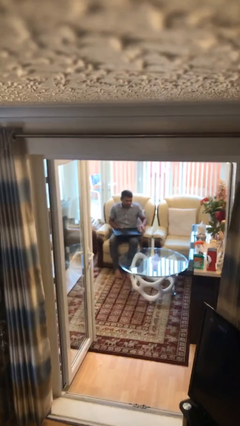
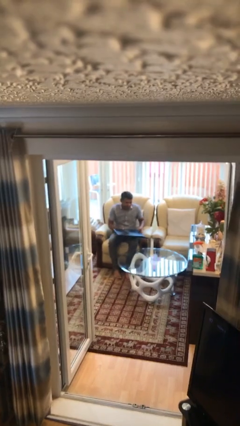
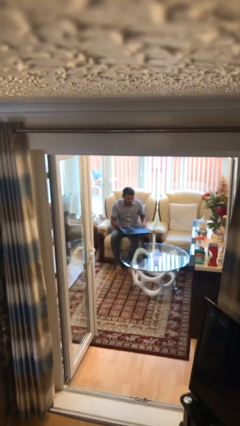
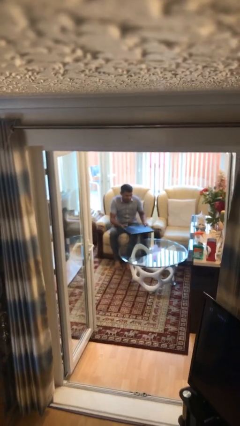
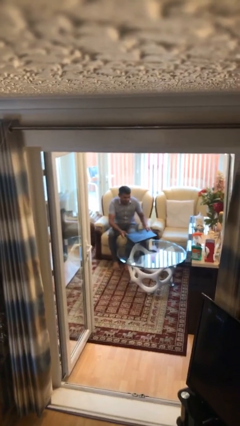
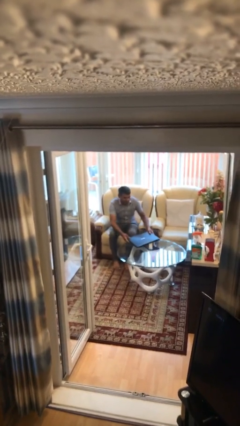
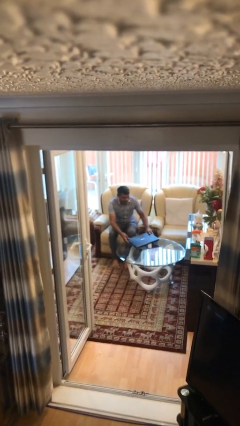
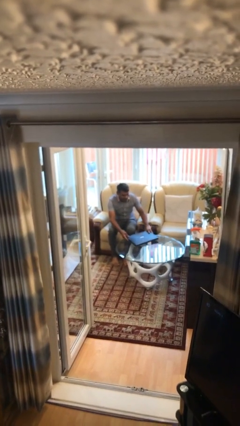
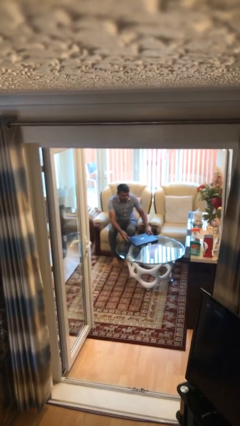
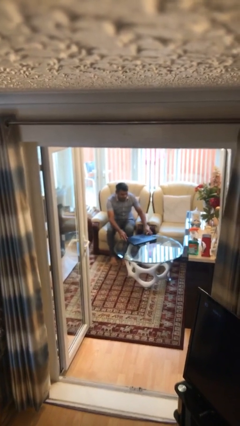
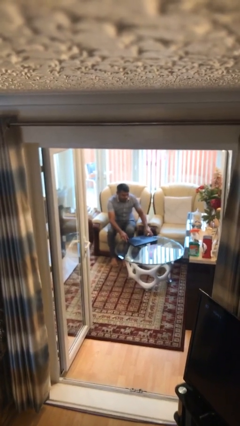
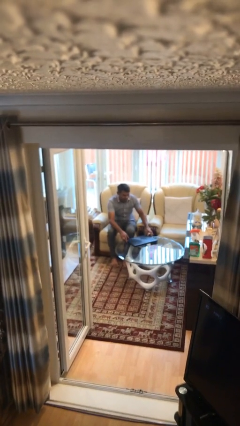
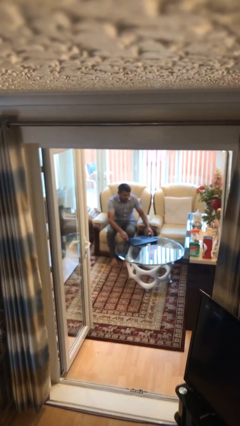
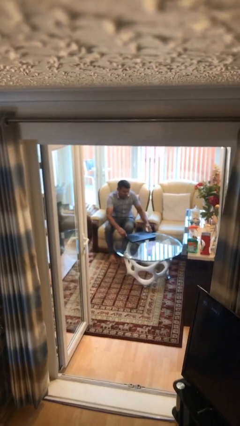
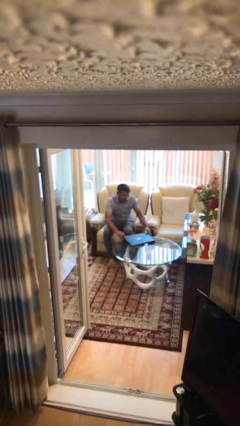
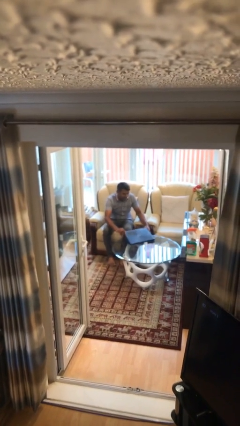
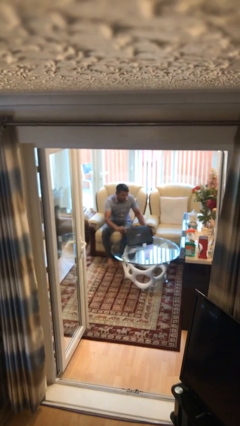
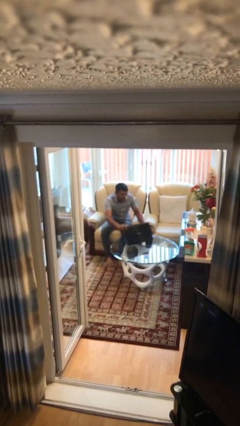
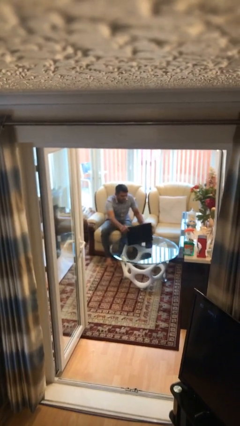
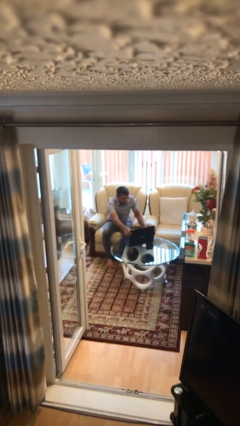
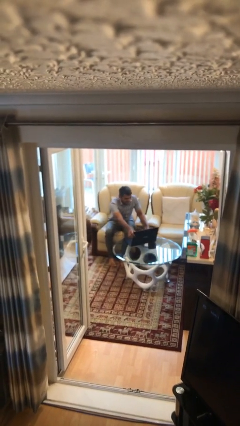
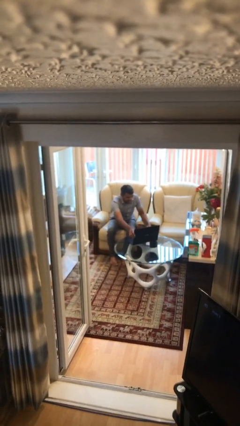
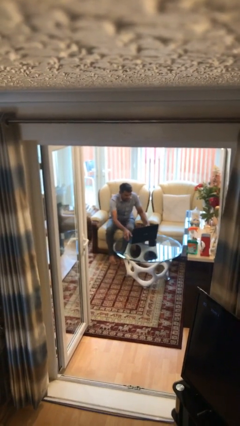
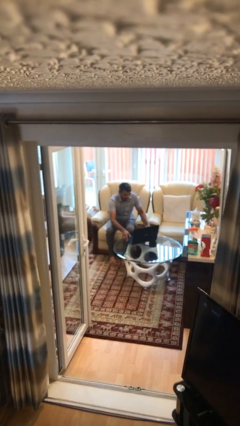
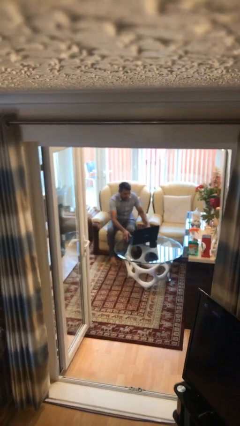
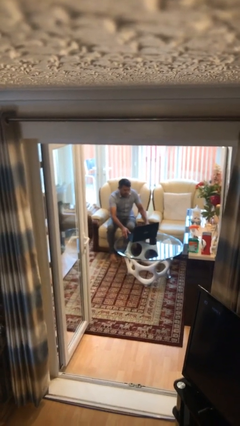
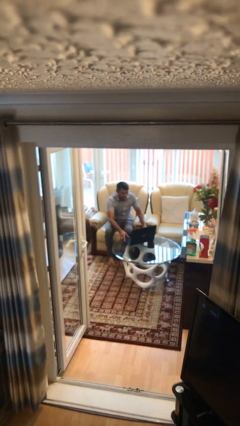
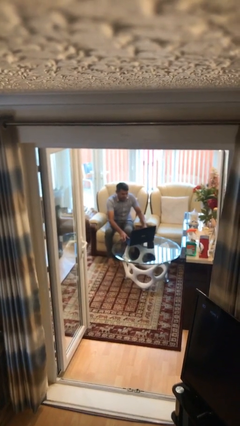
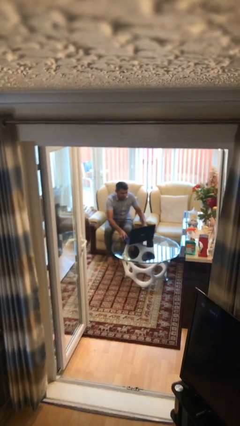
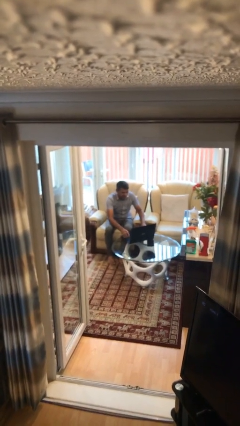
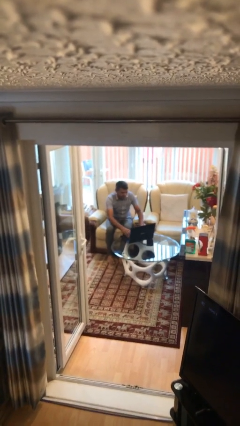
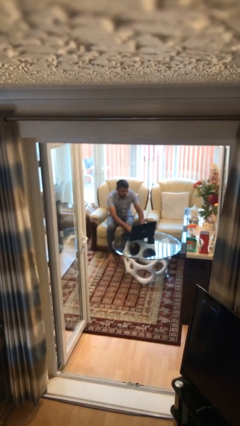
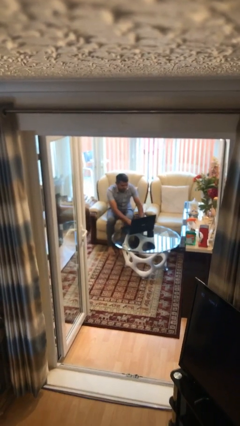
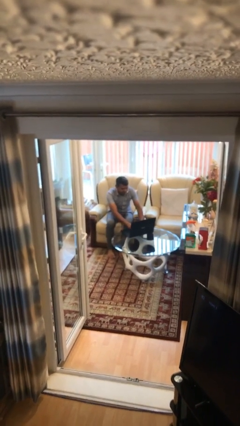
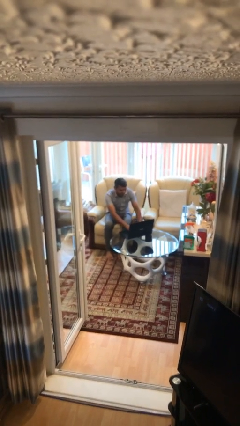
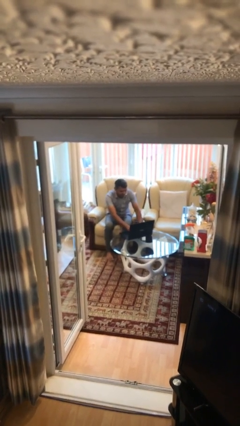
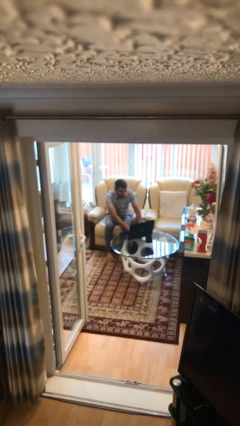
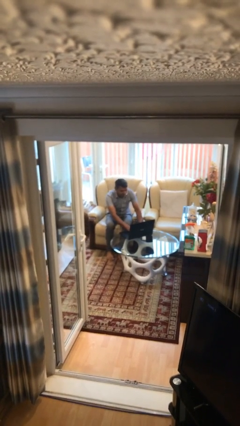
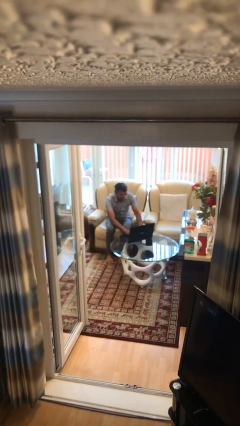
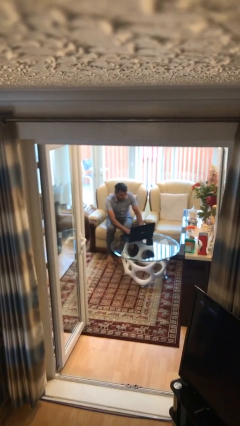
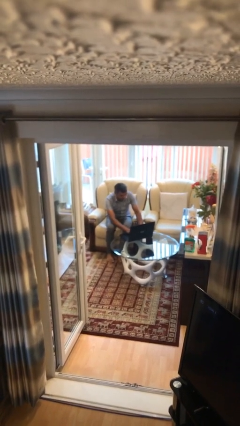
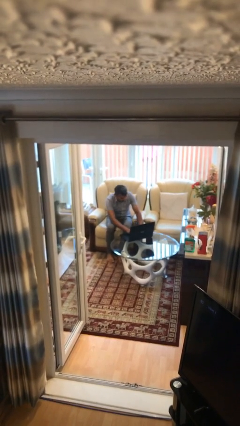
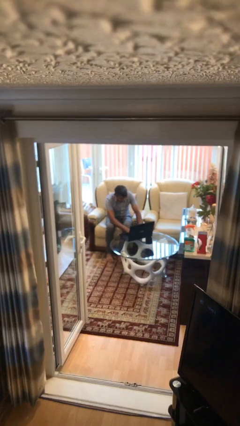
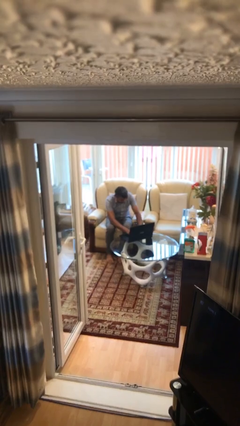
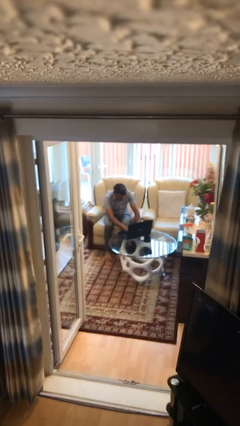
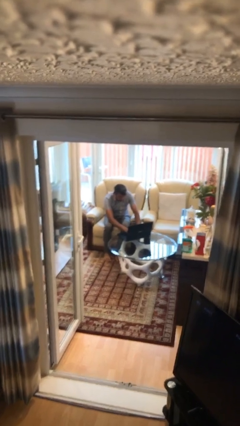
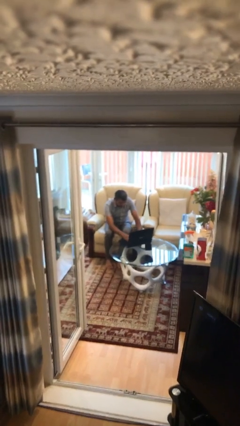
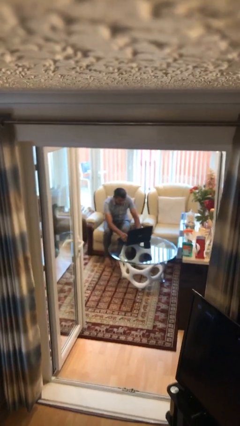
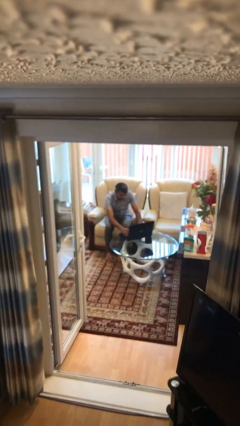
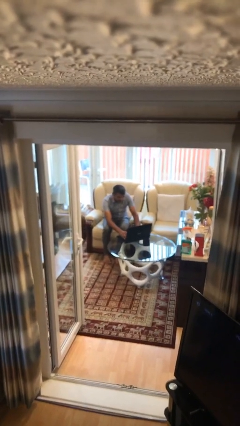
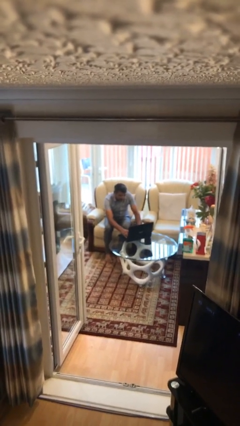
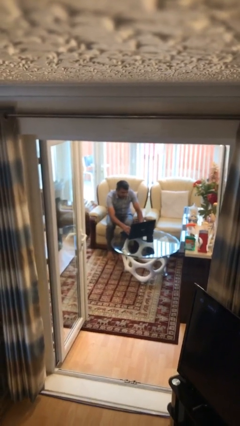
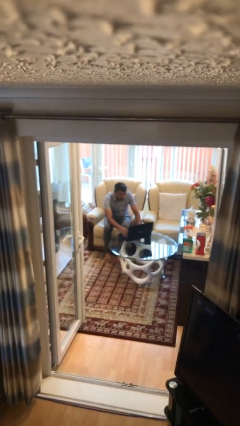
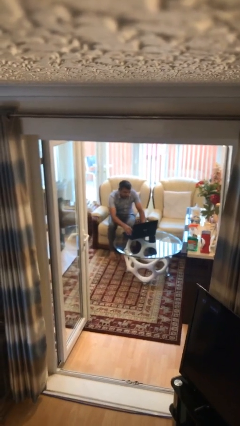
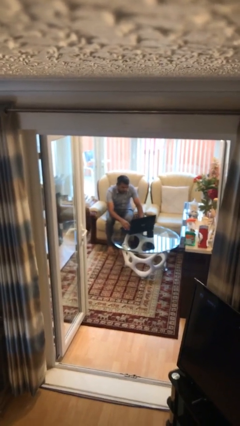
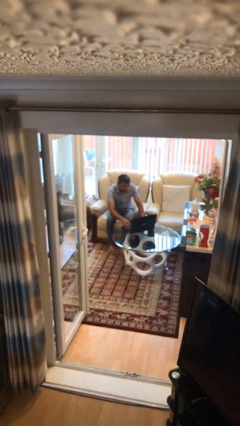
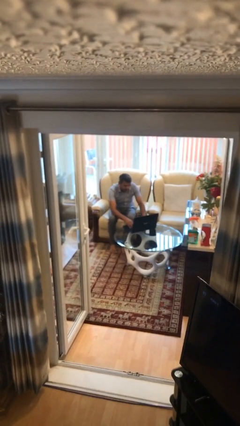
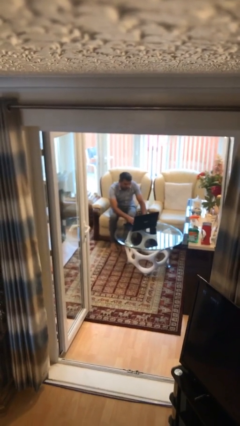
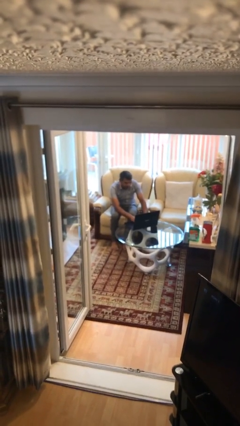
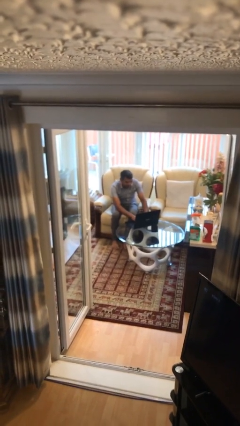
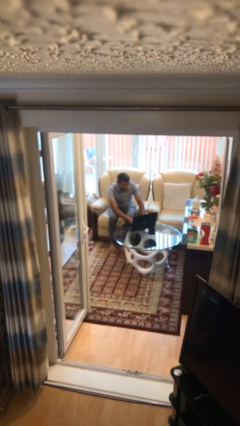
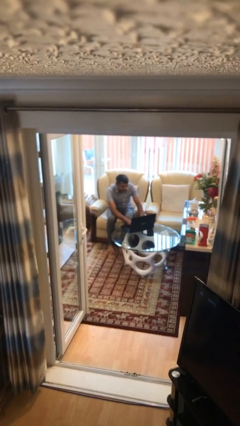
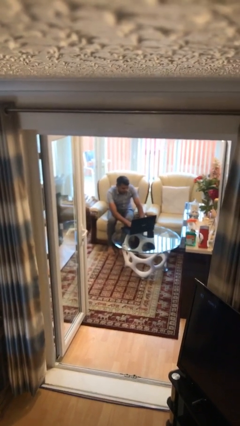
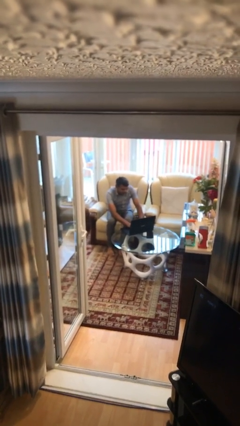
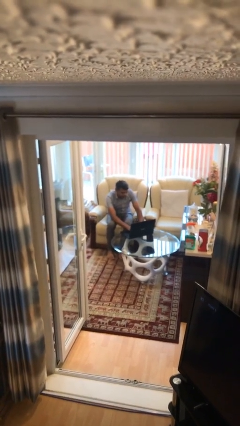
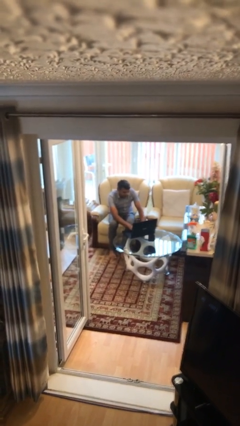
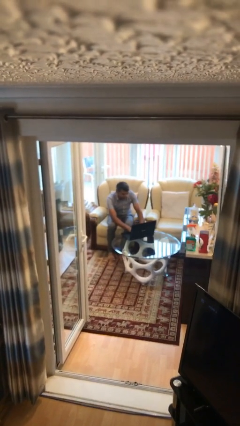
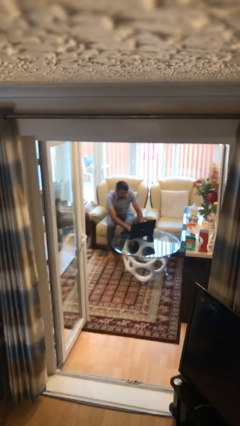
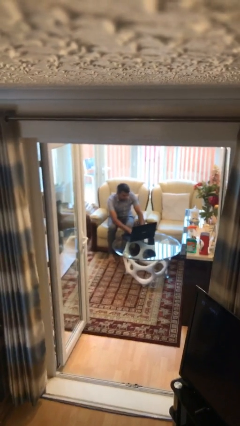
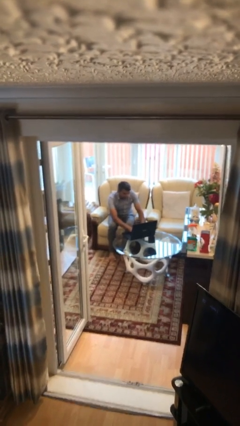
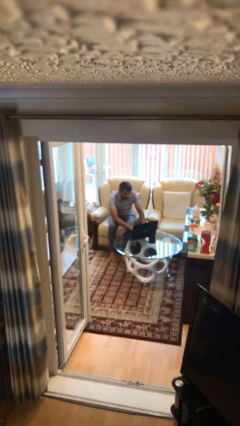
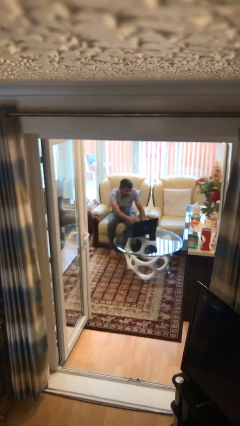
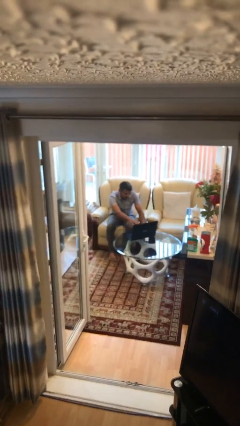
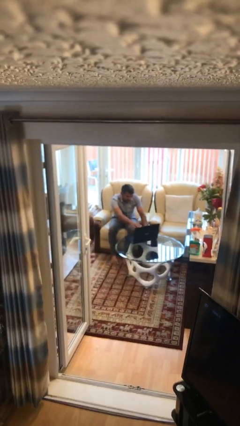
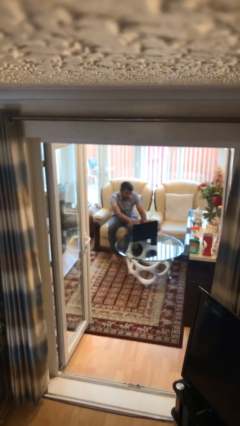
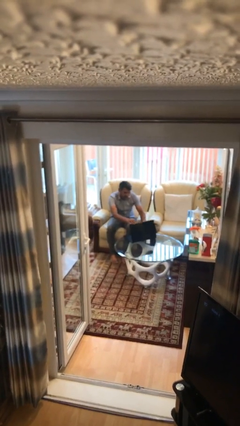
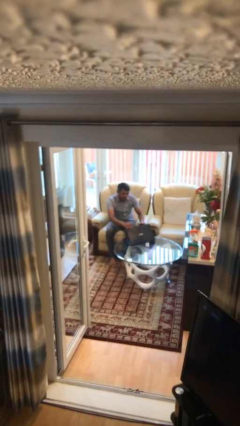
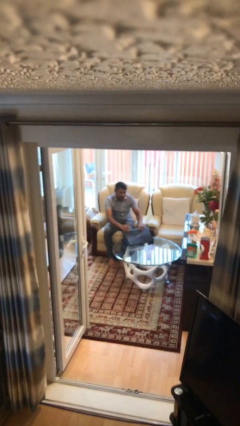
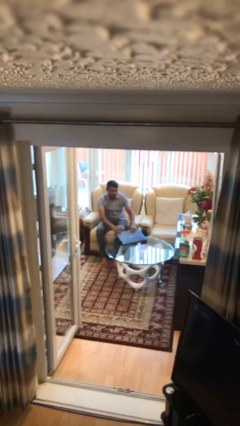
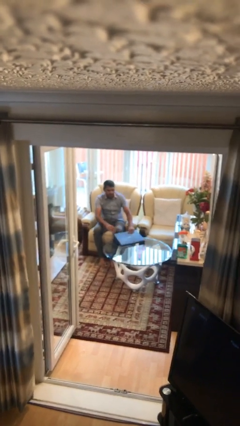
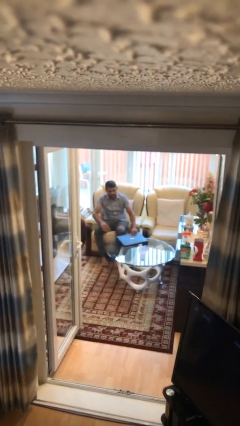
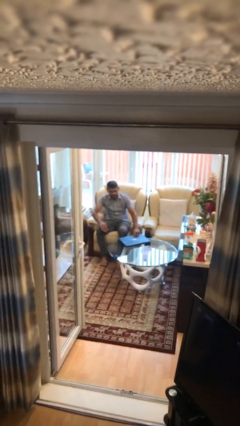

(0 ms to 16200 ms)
person interacts with laptop

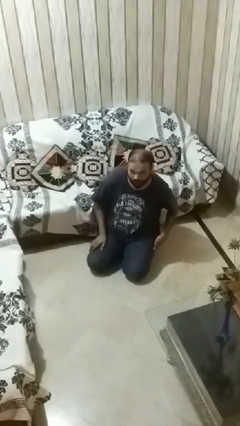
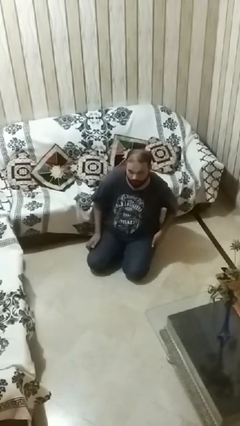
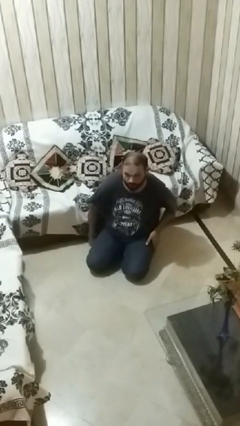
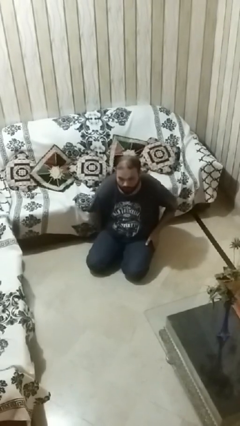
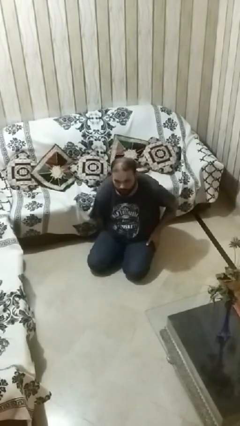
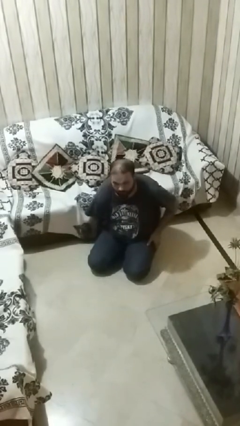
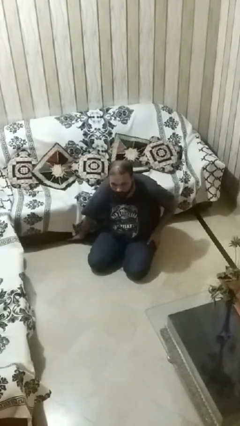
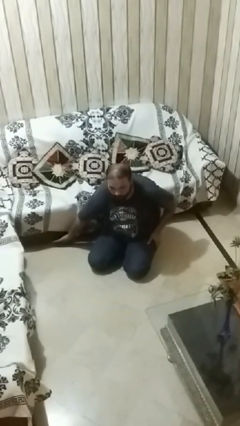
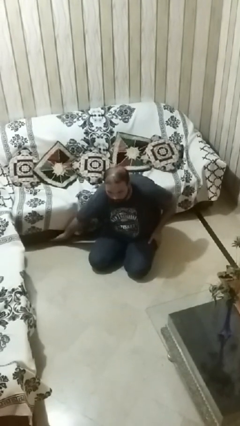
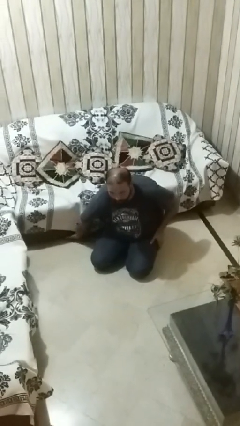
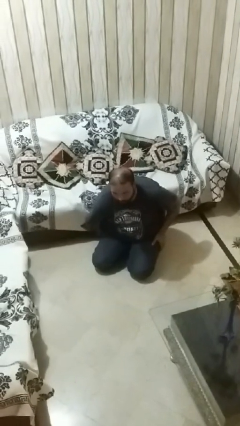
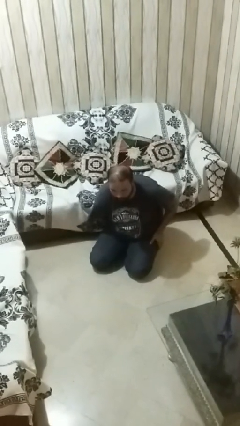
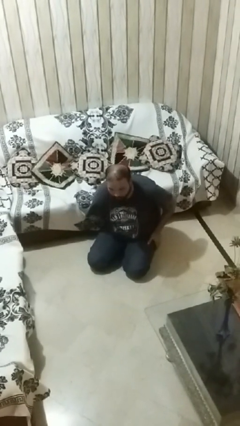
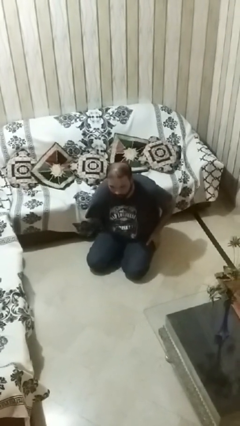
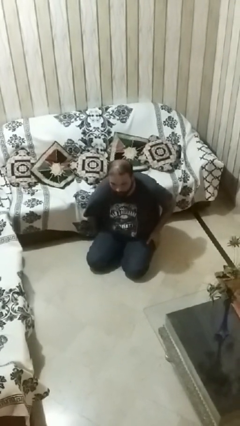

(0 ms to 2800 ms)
person searches under couch
